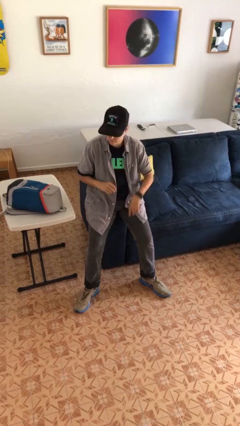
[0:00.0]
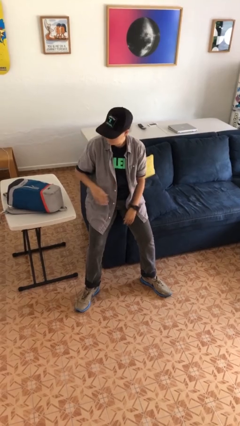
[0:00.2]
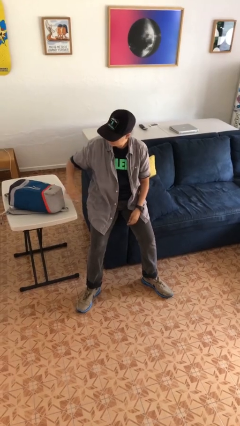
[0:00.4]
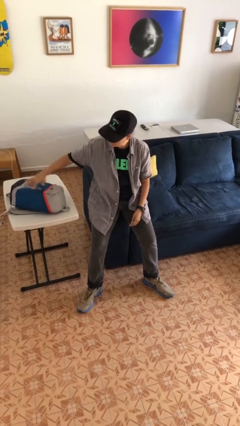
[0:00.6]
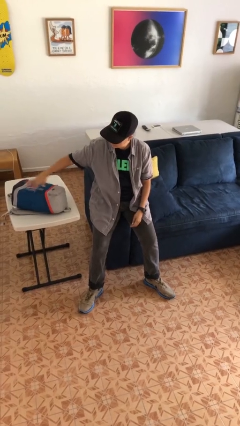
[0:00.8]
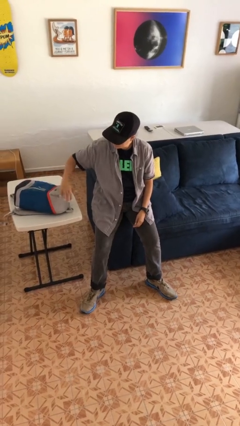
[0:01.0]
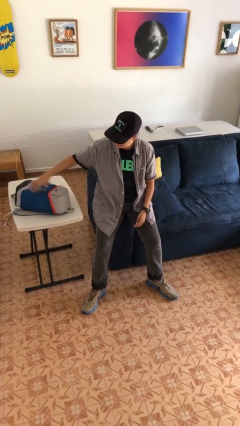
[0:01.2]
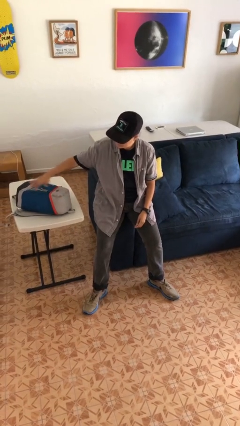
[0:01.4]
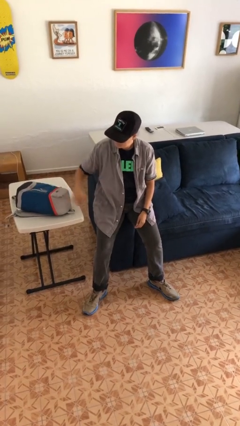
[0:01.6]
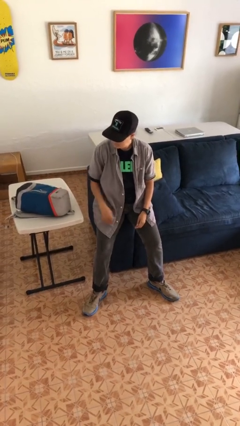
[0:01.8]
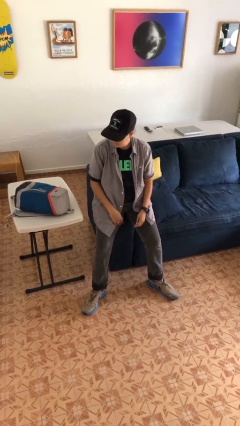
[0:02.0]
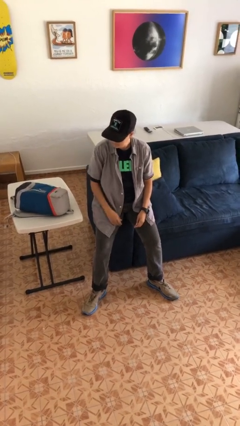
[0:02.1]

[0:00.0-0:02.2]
person waves hand over object

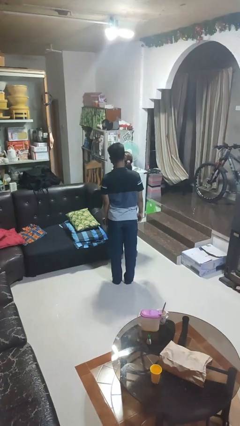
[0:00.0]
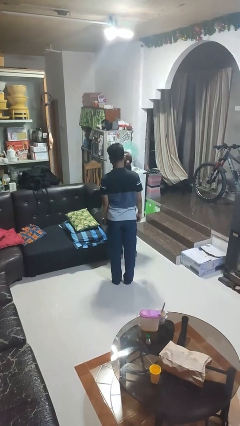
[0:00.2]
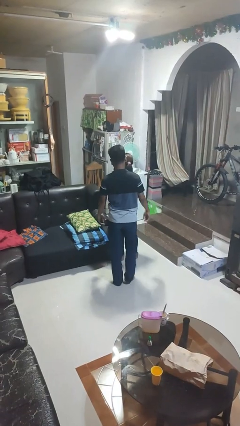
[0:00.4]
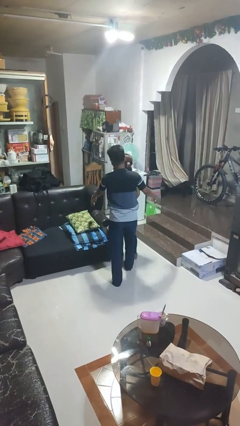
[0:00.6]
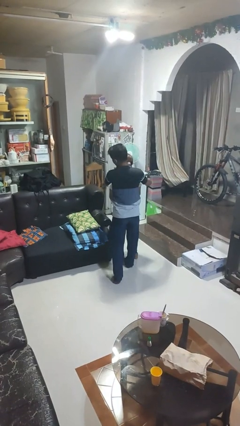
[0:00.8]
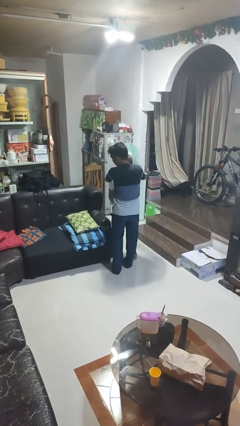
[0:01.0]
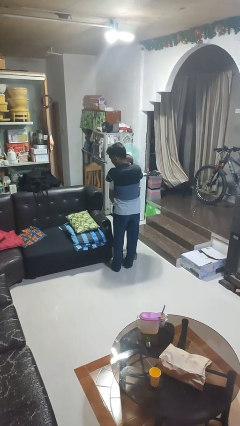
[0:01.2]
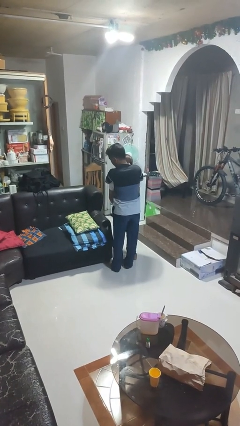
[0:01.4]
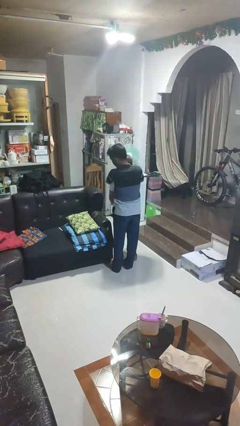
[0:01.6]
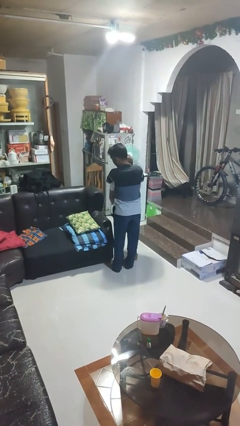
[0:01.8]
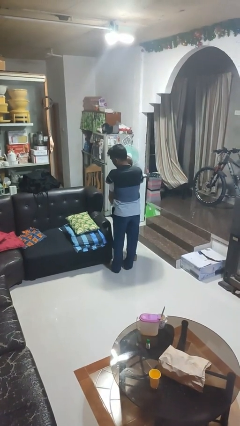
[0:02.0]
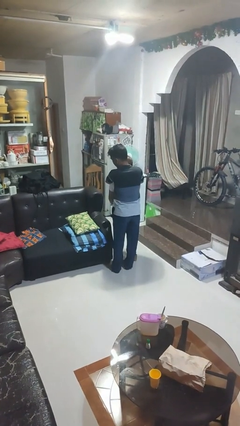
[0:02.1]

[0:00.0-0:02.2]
person hugs person from behind

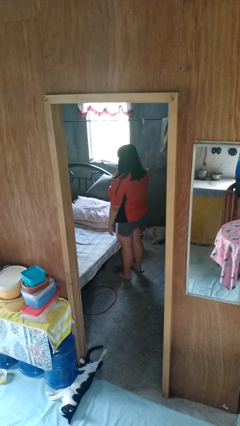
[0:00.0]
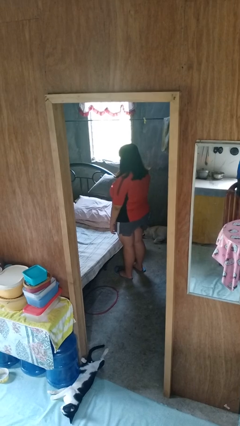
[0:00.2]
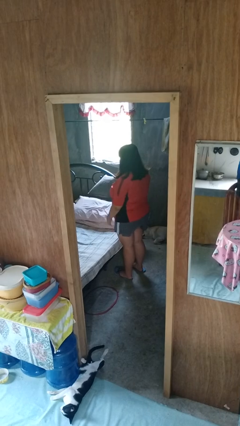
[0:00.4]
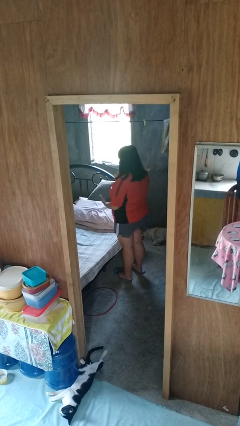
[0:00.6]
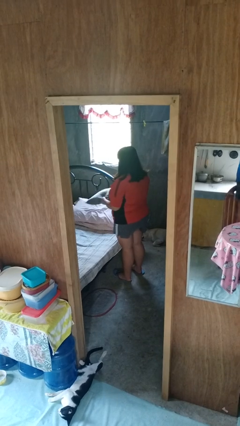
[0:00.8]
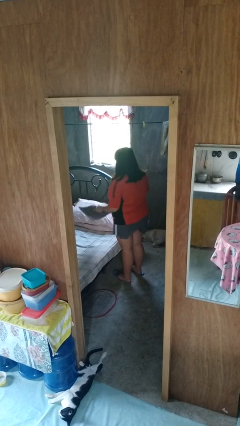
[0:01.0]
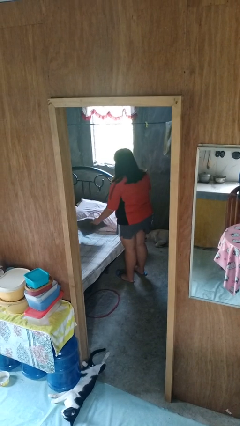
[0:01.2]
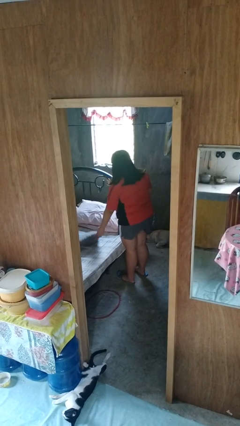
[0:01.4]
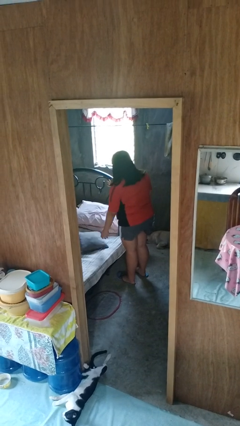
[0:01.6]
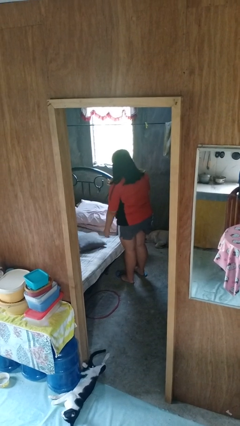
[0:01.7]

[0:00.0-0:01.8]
person puts down object on bed

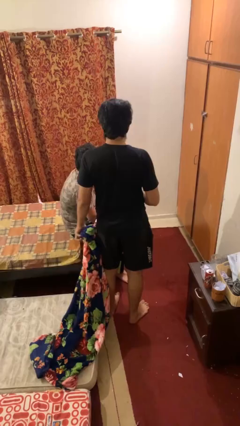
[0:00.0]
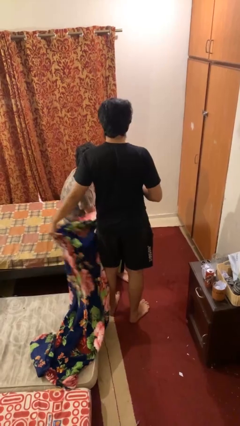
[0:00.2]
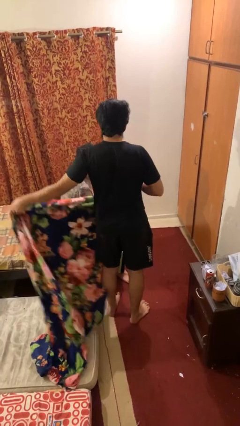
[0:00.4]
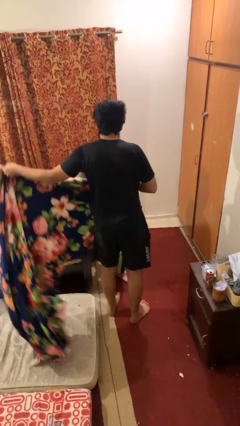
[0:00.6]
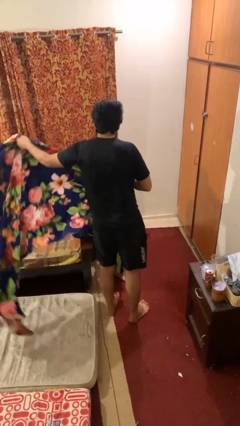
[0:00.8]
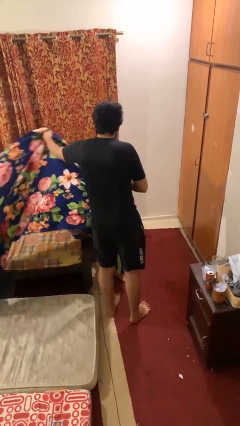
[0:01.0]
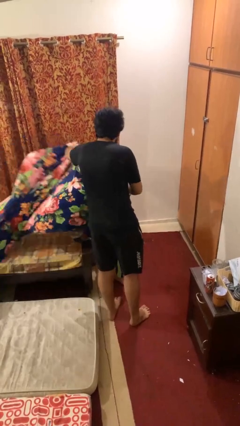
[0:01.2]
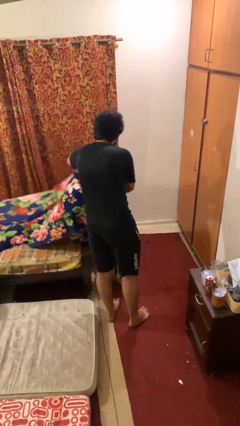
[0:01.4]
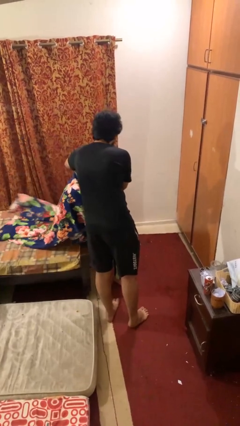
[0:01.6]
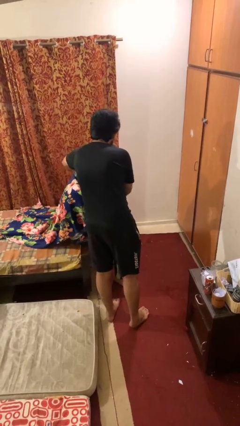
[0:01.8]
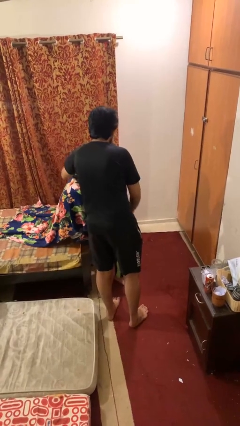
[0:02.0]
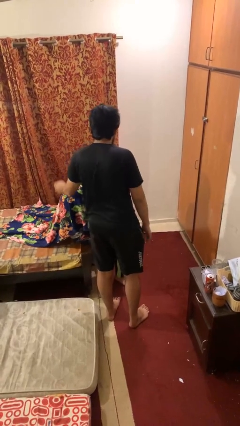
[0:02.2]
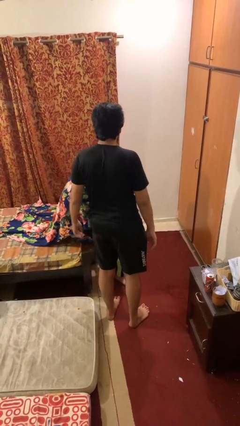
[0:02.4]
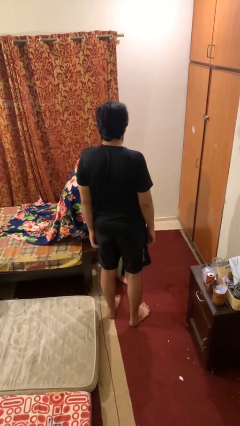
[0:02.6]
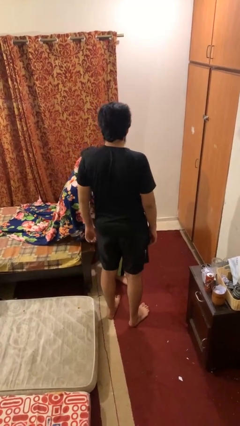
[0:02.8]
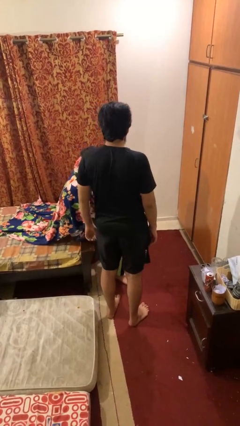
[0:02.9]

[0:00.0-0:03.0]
person covers friend with blanket

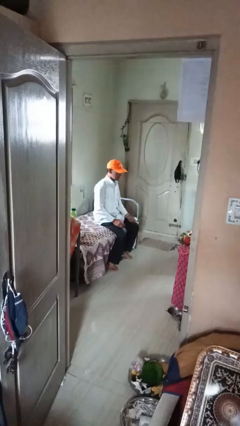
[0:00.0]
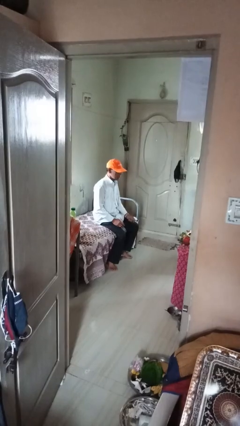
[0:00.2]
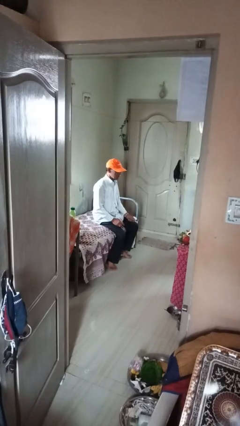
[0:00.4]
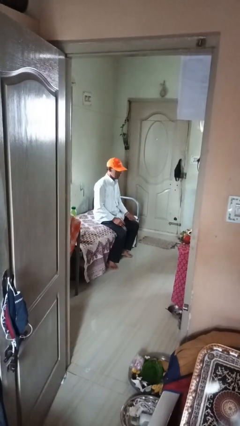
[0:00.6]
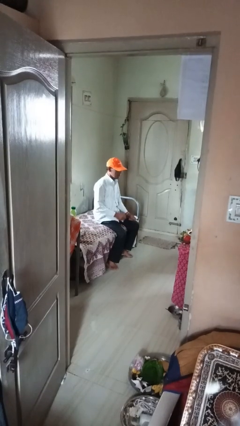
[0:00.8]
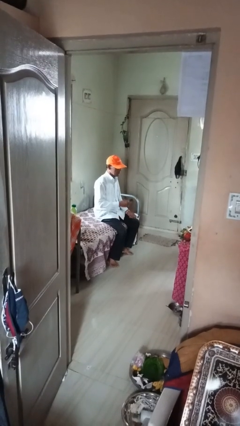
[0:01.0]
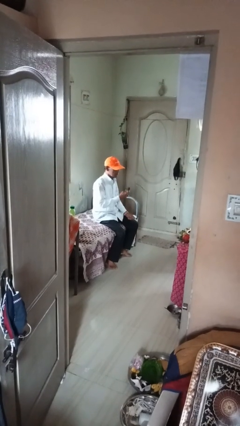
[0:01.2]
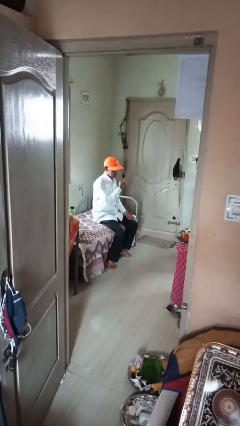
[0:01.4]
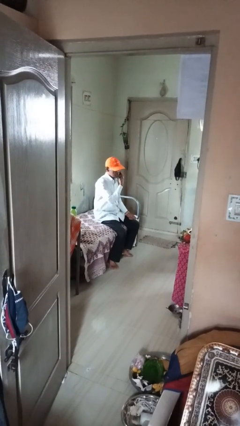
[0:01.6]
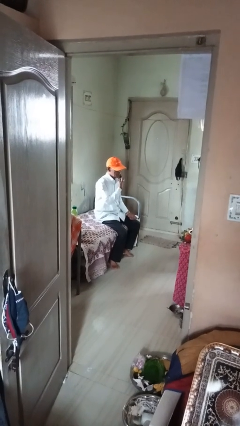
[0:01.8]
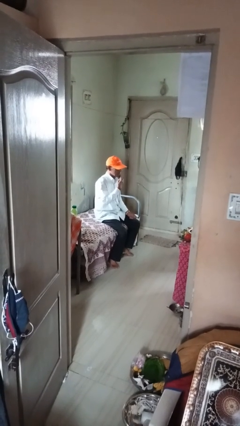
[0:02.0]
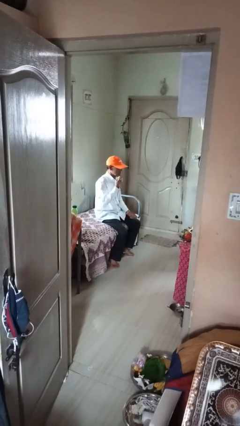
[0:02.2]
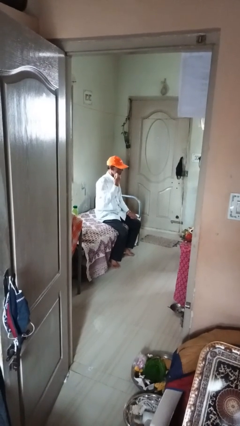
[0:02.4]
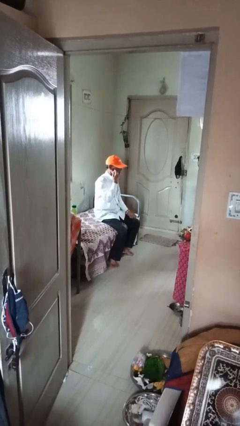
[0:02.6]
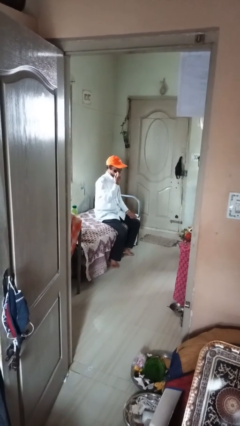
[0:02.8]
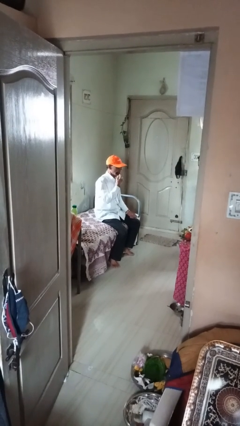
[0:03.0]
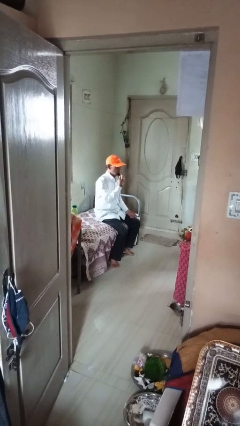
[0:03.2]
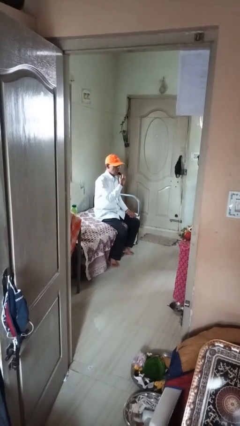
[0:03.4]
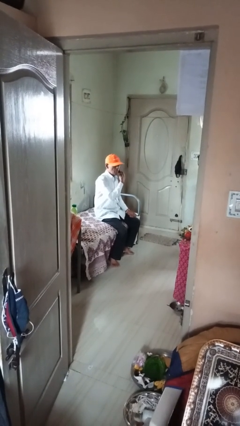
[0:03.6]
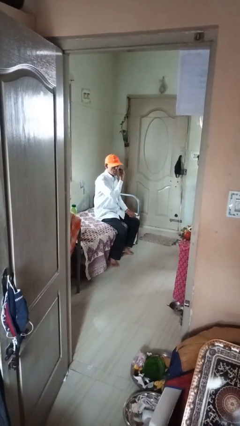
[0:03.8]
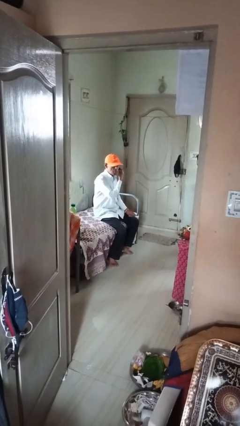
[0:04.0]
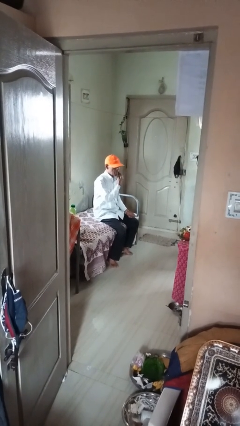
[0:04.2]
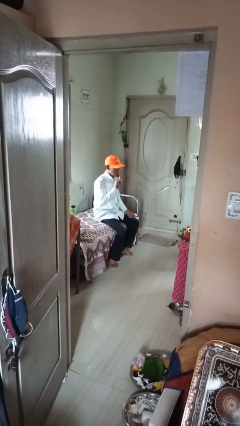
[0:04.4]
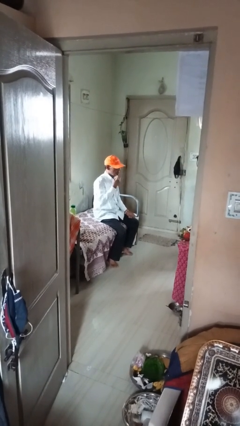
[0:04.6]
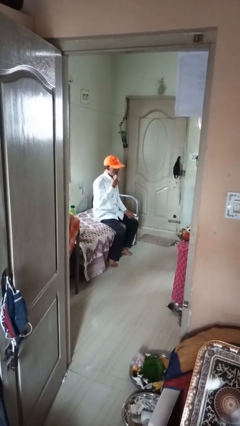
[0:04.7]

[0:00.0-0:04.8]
person applies shaving cream

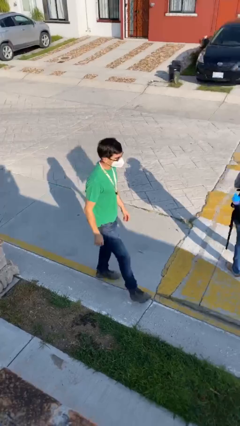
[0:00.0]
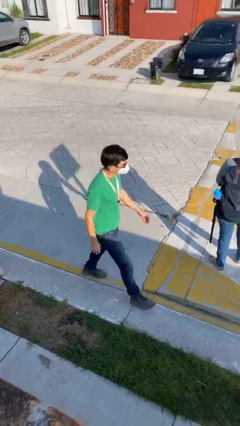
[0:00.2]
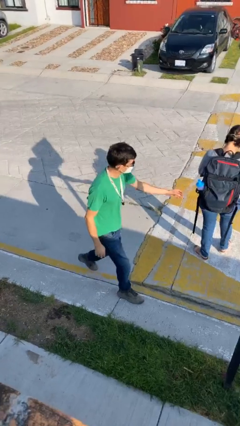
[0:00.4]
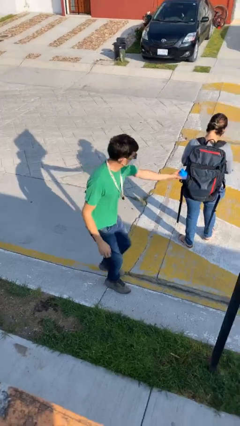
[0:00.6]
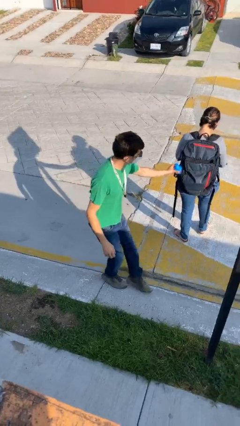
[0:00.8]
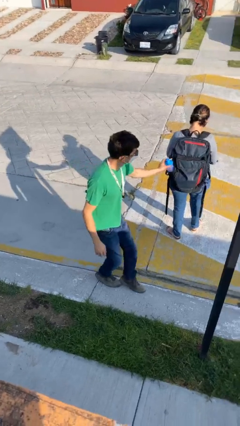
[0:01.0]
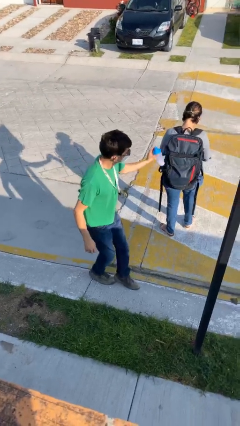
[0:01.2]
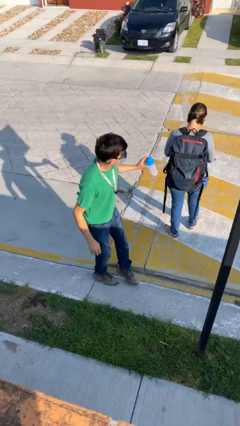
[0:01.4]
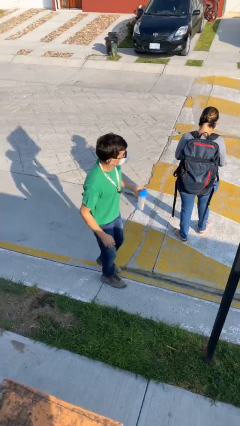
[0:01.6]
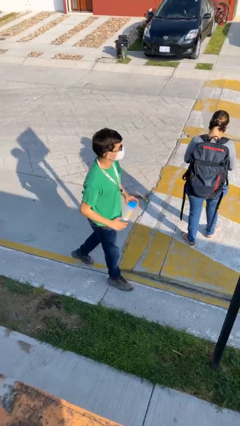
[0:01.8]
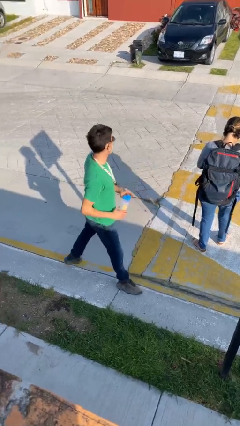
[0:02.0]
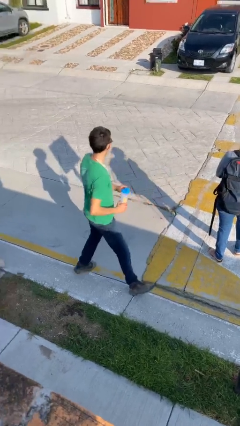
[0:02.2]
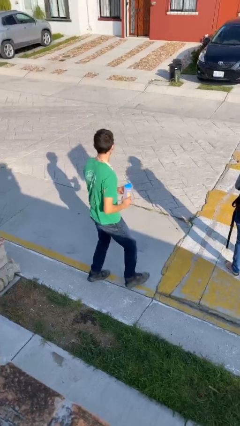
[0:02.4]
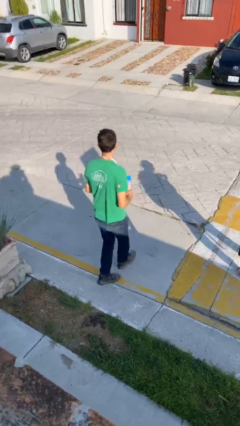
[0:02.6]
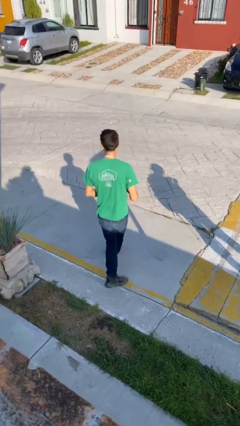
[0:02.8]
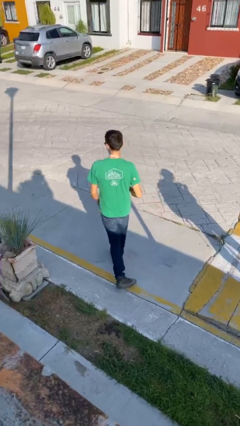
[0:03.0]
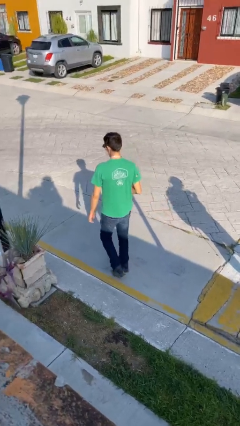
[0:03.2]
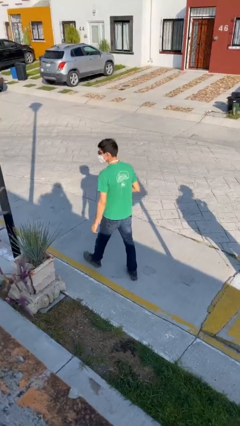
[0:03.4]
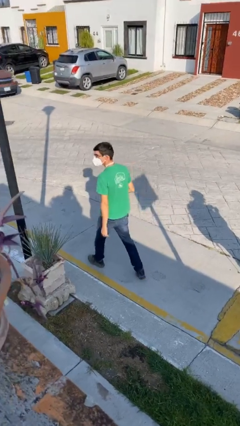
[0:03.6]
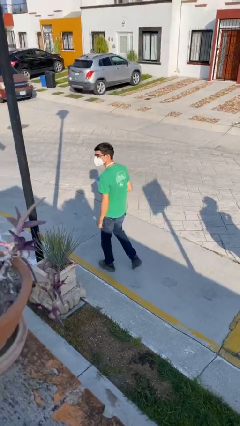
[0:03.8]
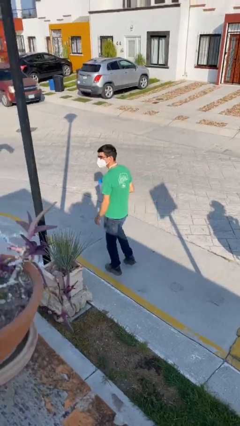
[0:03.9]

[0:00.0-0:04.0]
person steals object from person
